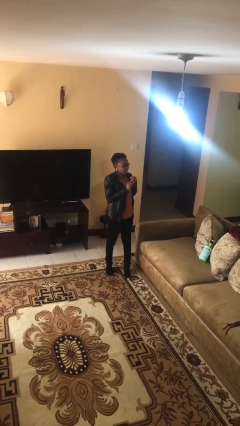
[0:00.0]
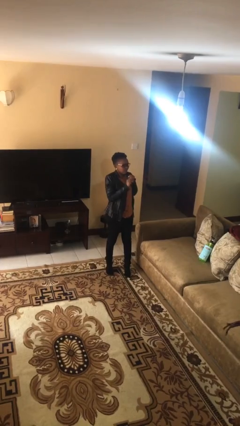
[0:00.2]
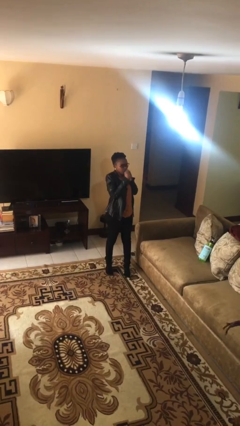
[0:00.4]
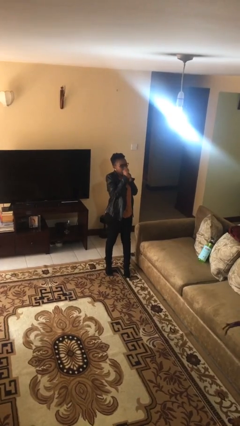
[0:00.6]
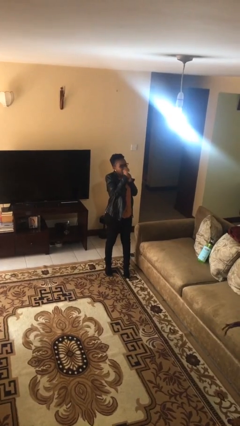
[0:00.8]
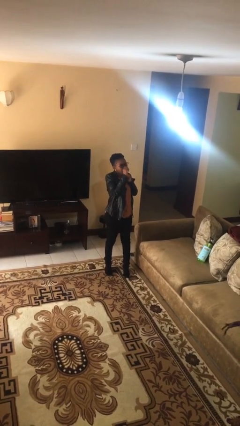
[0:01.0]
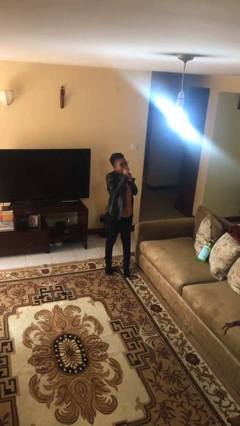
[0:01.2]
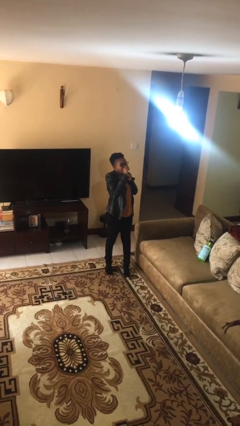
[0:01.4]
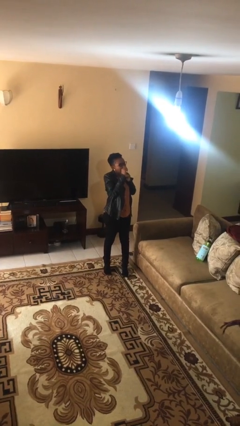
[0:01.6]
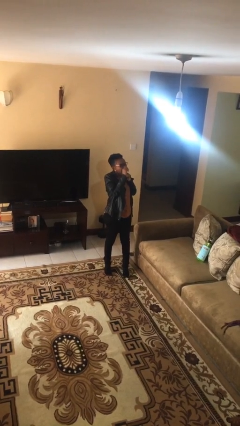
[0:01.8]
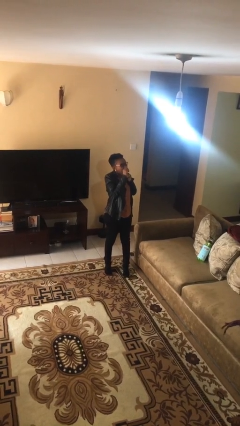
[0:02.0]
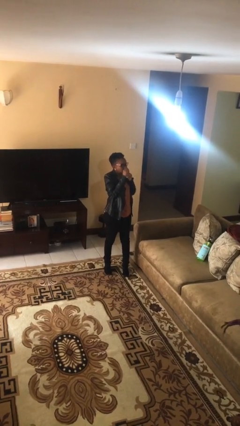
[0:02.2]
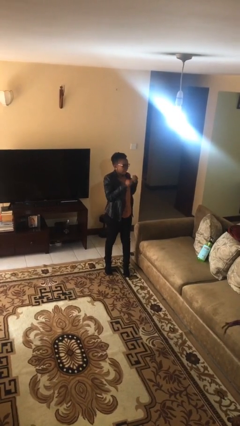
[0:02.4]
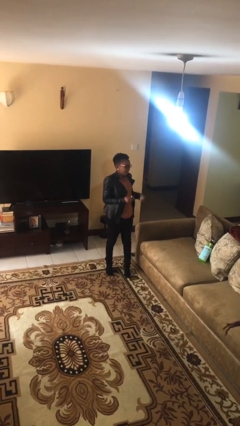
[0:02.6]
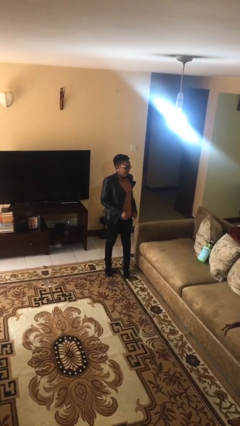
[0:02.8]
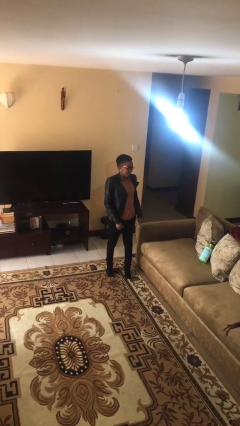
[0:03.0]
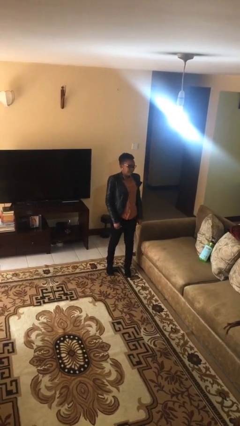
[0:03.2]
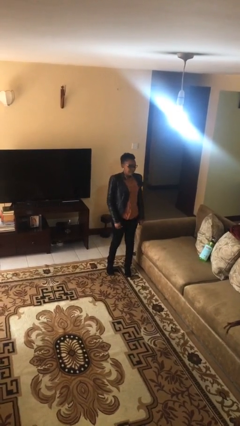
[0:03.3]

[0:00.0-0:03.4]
person flosses

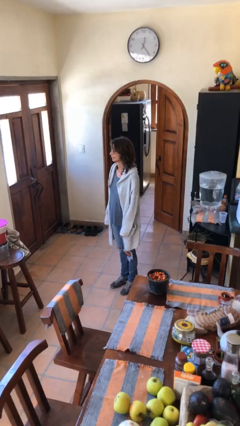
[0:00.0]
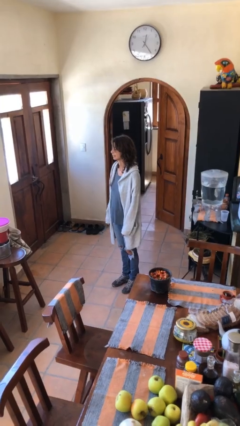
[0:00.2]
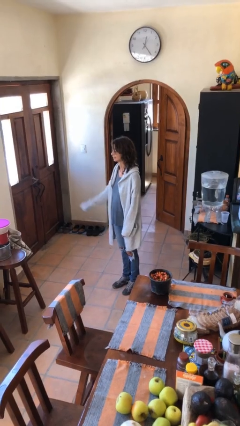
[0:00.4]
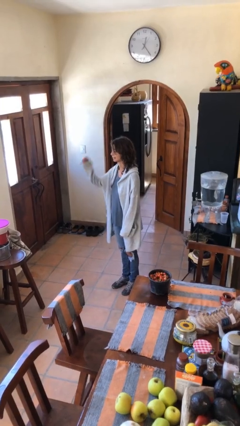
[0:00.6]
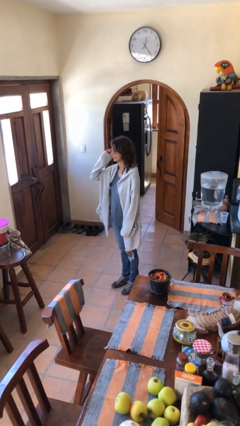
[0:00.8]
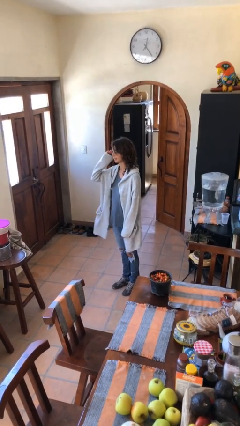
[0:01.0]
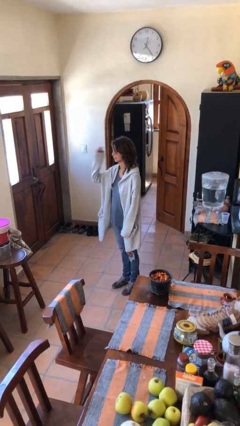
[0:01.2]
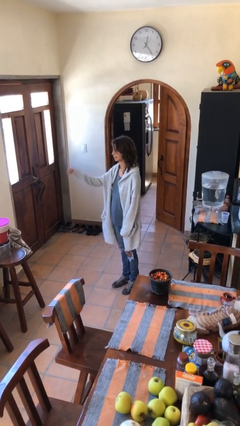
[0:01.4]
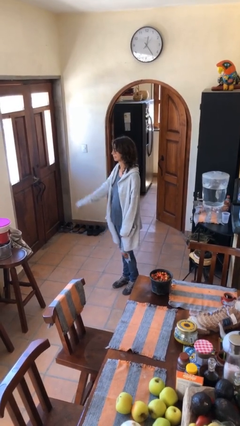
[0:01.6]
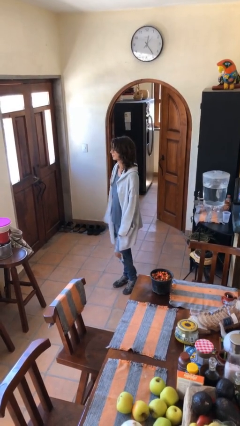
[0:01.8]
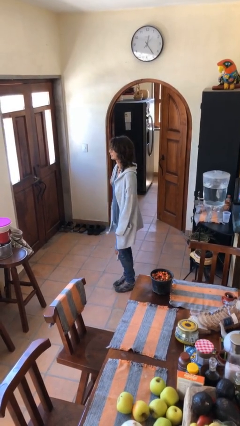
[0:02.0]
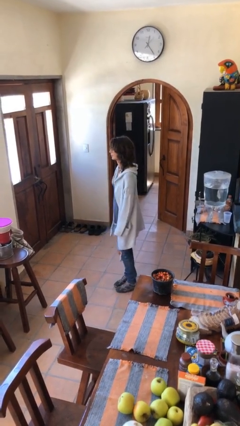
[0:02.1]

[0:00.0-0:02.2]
person salutes

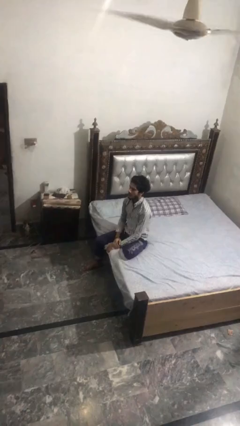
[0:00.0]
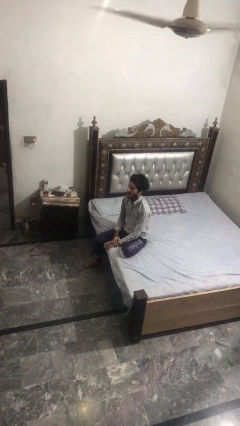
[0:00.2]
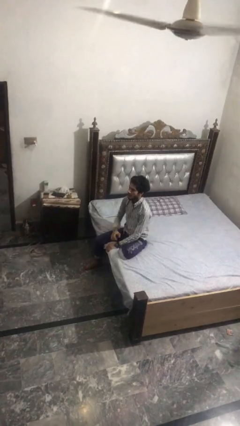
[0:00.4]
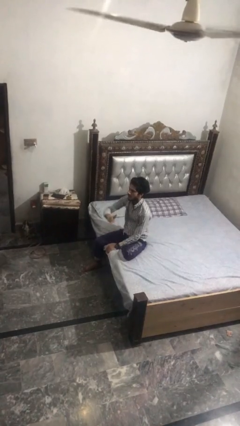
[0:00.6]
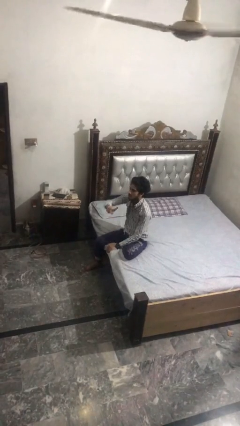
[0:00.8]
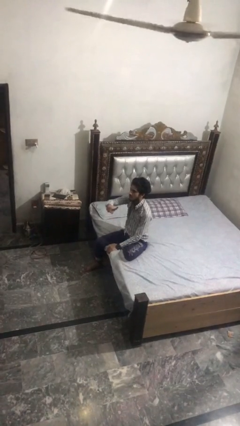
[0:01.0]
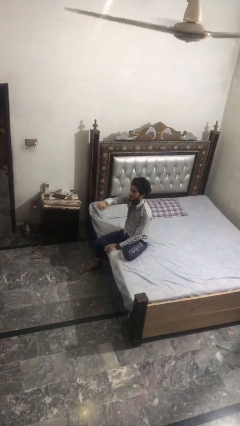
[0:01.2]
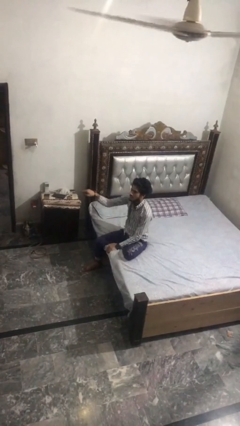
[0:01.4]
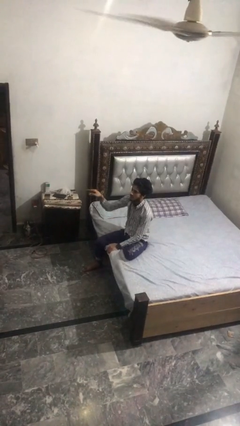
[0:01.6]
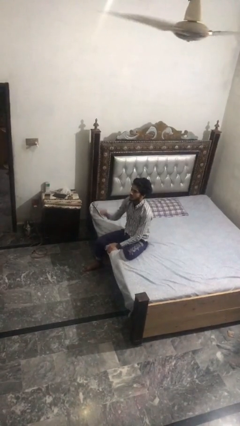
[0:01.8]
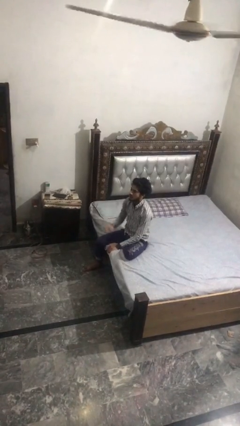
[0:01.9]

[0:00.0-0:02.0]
person gestures swipe right

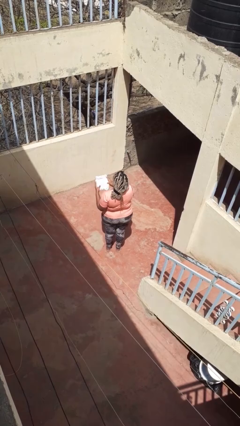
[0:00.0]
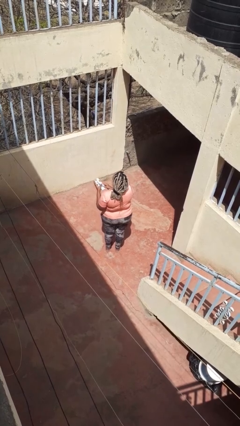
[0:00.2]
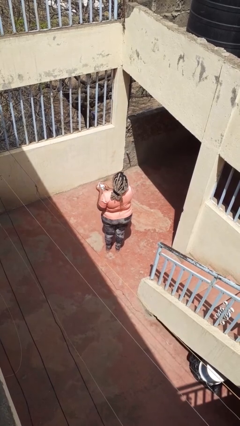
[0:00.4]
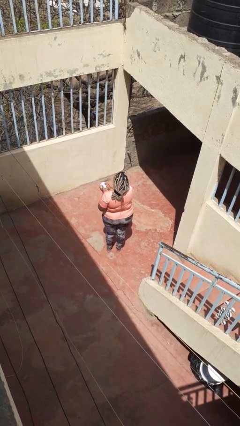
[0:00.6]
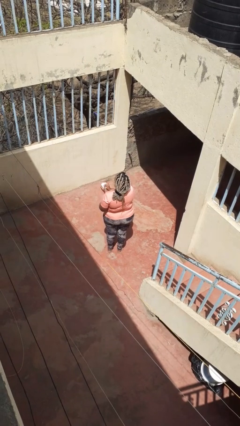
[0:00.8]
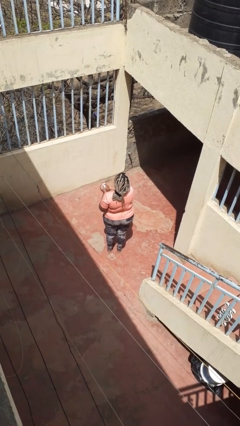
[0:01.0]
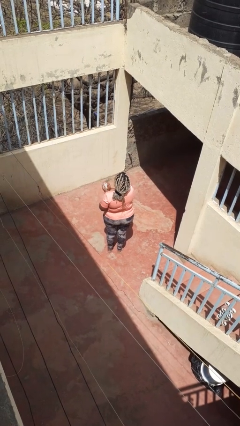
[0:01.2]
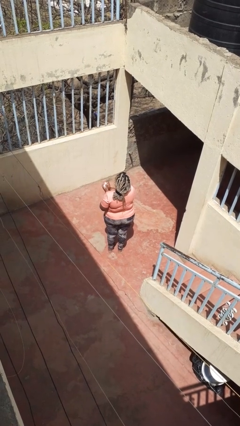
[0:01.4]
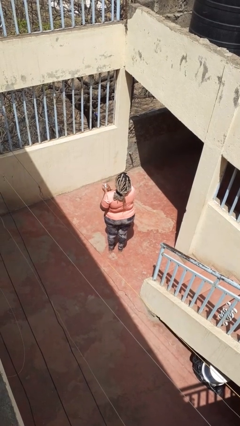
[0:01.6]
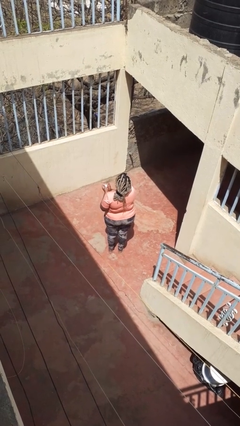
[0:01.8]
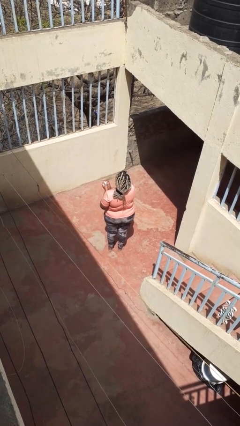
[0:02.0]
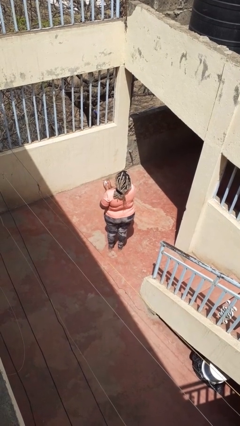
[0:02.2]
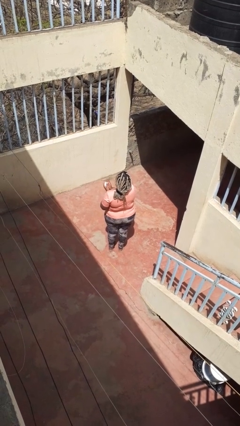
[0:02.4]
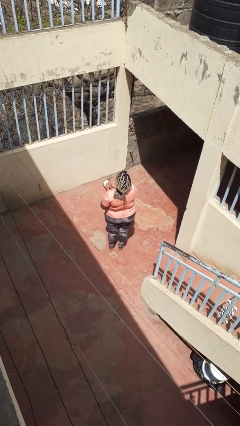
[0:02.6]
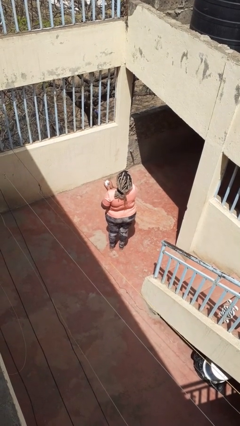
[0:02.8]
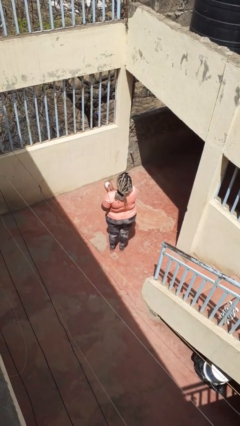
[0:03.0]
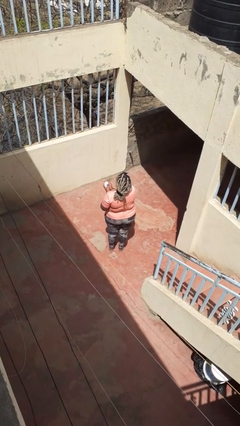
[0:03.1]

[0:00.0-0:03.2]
person crumples paper

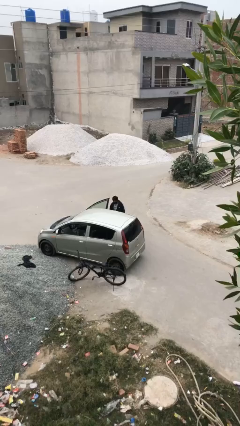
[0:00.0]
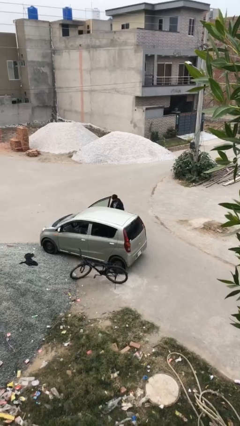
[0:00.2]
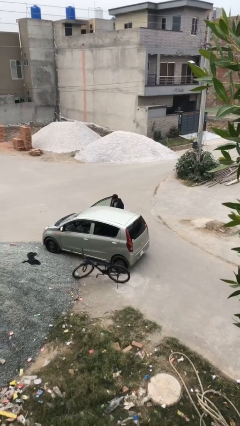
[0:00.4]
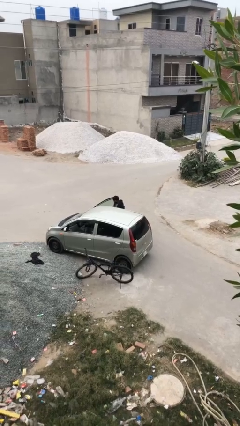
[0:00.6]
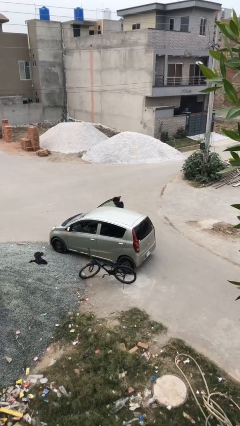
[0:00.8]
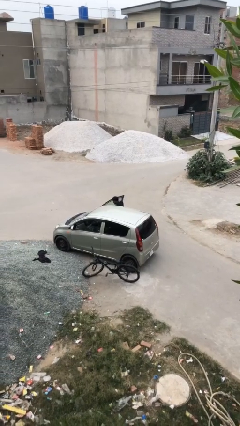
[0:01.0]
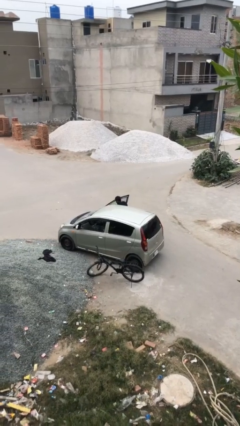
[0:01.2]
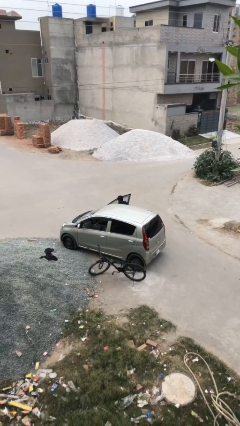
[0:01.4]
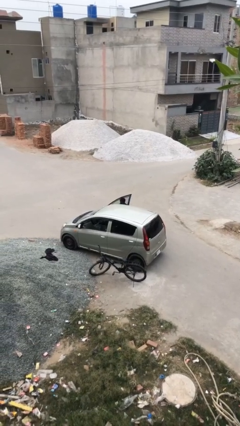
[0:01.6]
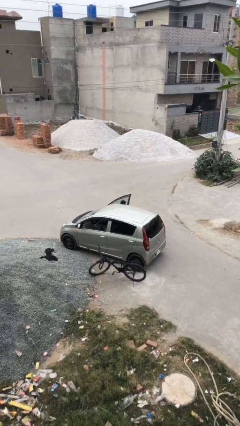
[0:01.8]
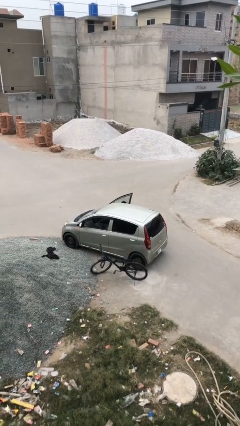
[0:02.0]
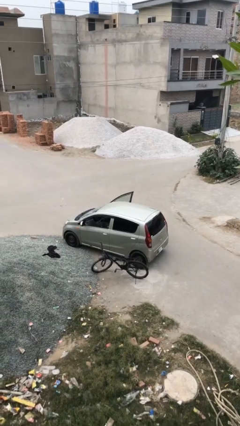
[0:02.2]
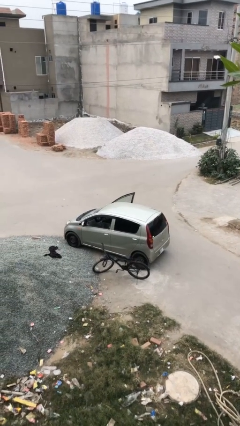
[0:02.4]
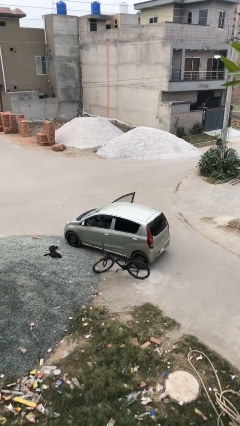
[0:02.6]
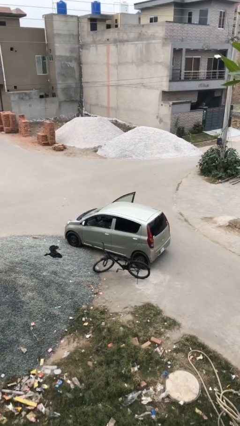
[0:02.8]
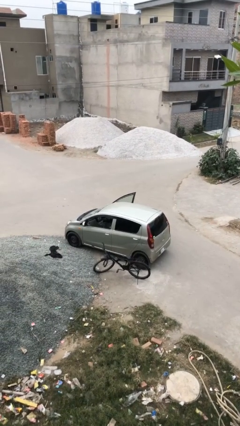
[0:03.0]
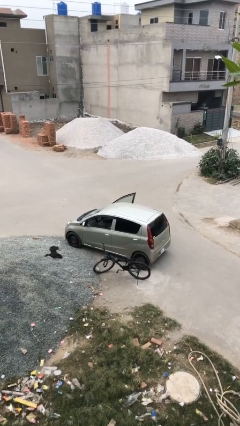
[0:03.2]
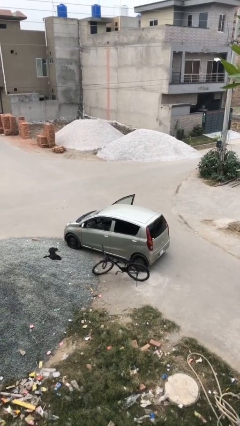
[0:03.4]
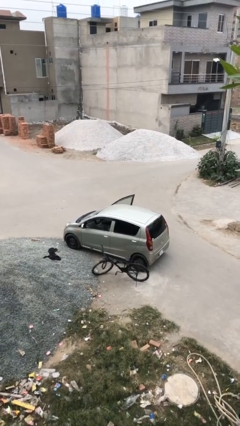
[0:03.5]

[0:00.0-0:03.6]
person enters car

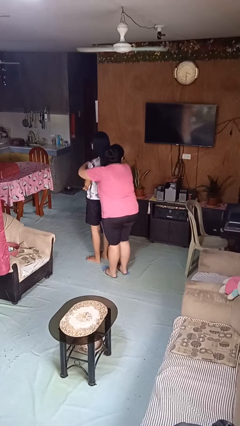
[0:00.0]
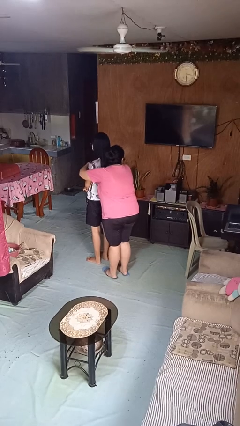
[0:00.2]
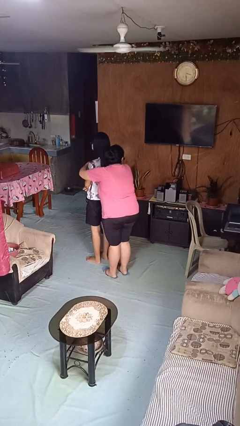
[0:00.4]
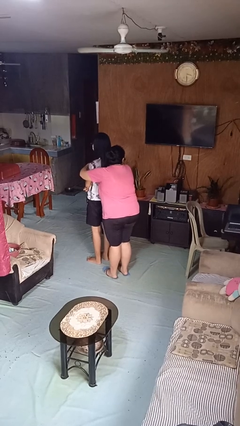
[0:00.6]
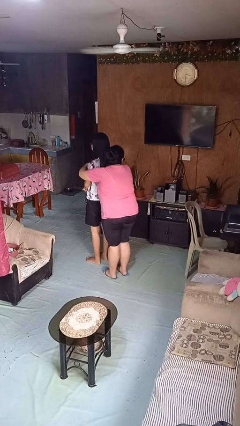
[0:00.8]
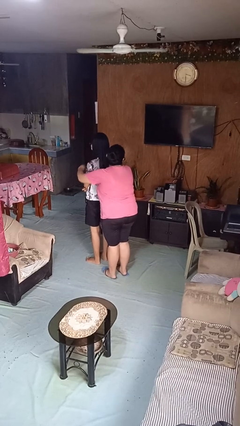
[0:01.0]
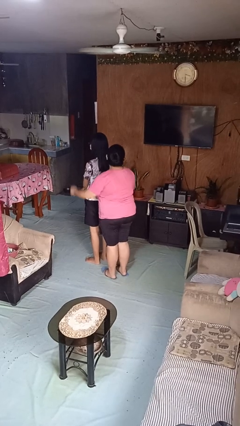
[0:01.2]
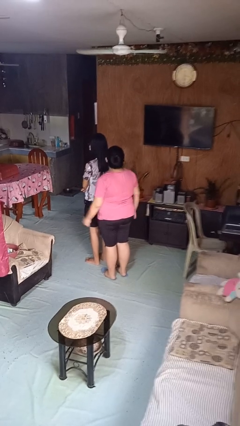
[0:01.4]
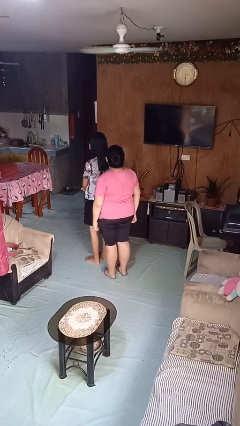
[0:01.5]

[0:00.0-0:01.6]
person hugs person from behind

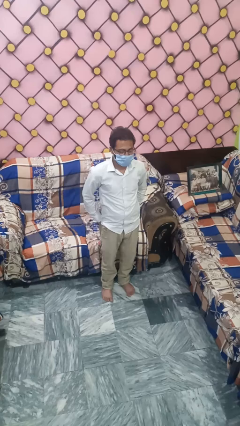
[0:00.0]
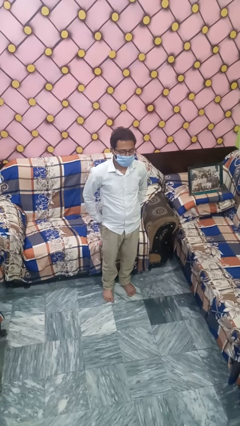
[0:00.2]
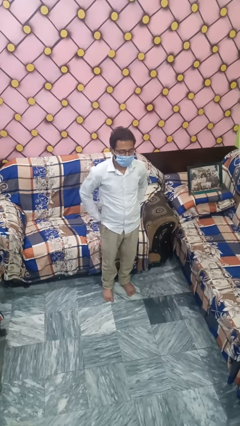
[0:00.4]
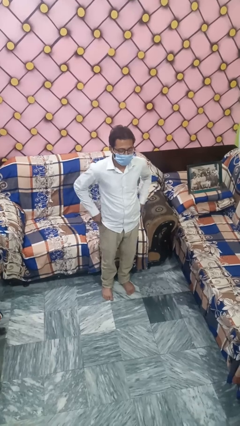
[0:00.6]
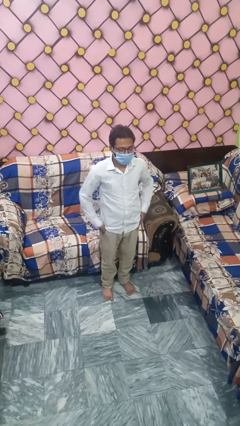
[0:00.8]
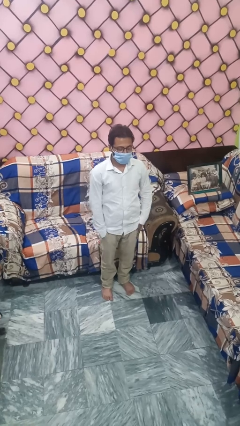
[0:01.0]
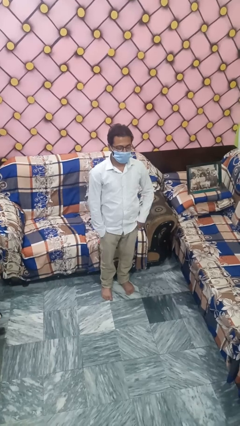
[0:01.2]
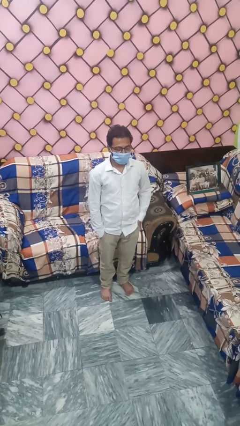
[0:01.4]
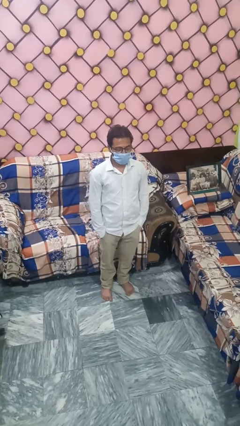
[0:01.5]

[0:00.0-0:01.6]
person puts hands in back pockets
